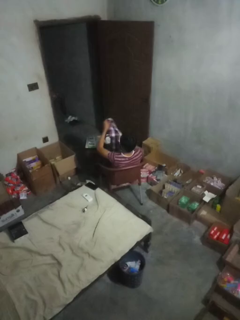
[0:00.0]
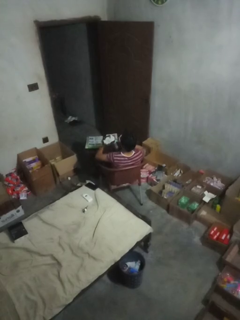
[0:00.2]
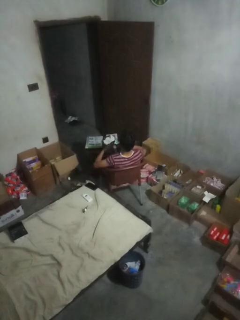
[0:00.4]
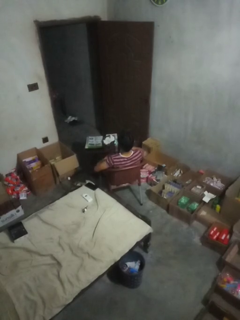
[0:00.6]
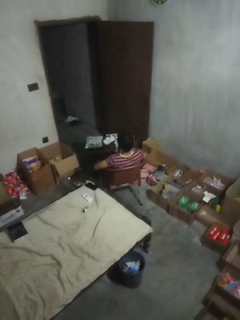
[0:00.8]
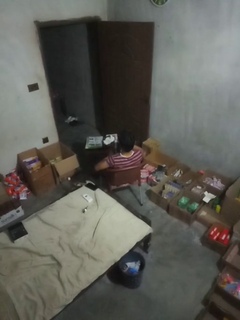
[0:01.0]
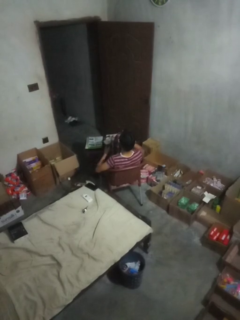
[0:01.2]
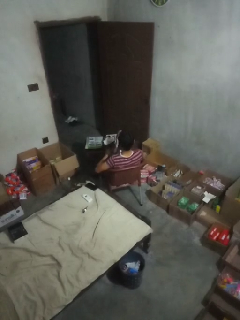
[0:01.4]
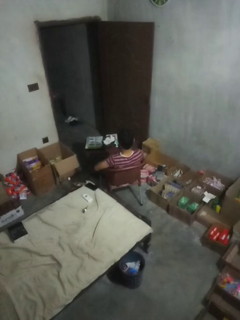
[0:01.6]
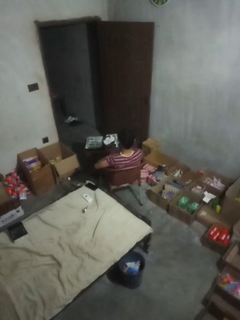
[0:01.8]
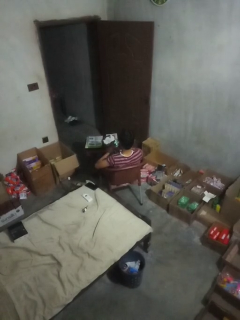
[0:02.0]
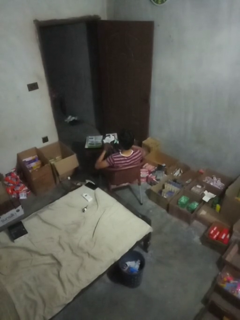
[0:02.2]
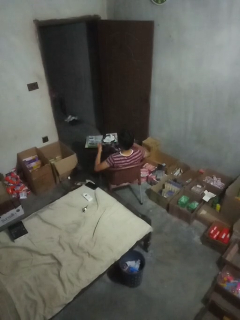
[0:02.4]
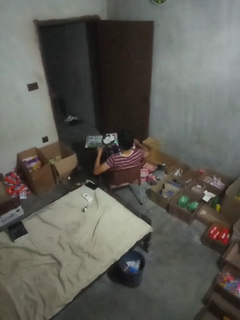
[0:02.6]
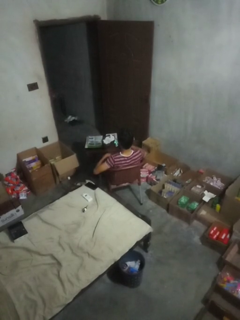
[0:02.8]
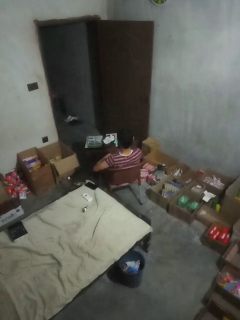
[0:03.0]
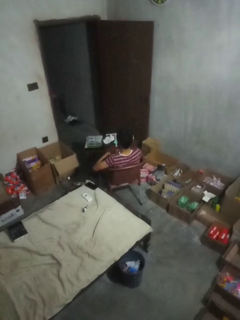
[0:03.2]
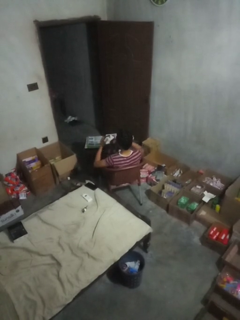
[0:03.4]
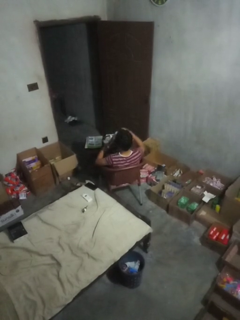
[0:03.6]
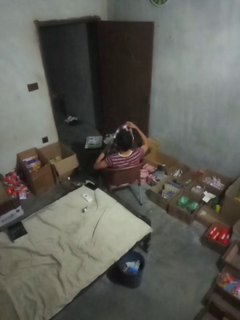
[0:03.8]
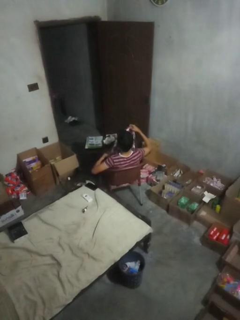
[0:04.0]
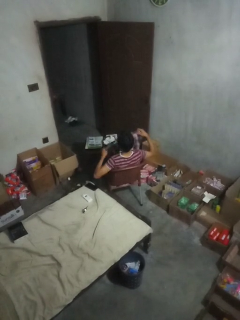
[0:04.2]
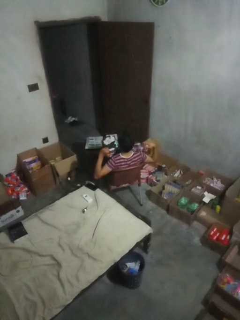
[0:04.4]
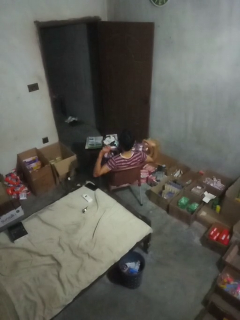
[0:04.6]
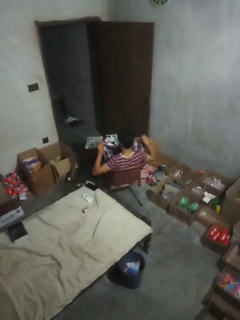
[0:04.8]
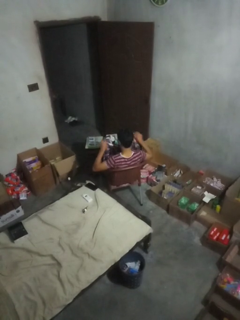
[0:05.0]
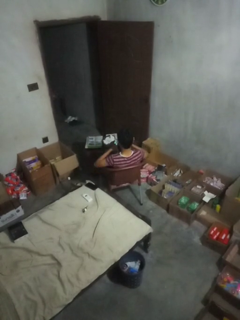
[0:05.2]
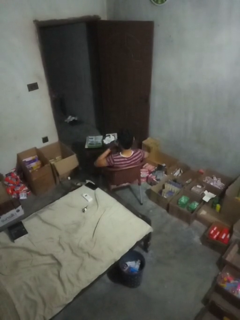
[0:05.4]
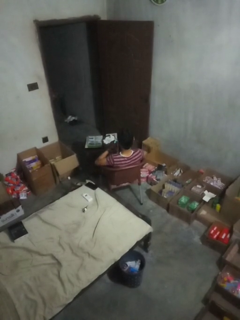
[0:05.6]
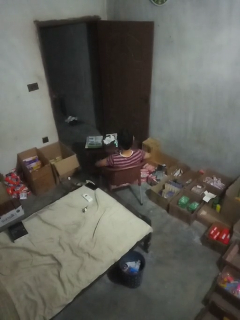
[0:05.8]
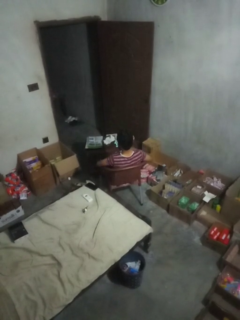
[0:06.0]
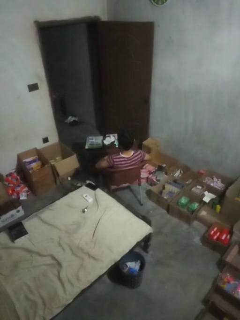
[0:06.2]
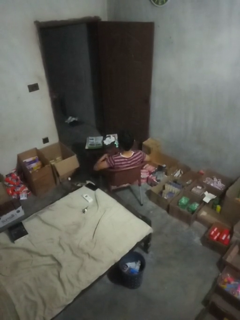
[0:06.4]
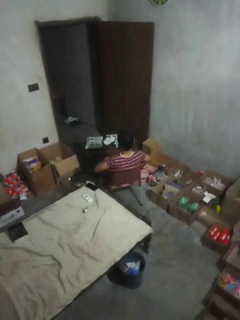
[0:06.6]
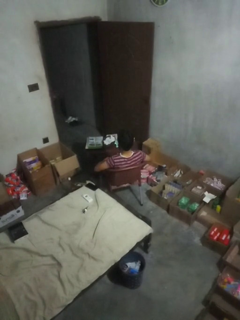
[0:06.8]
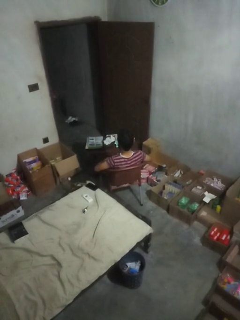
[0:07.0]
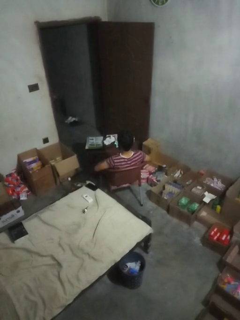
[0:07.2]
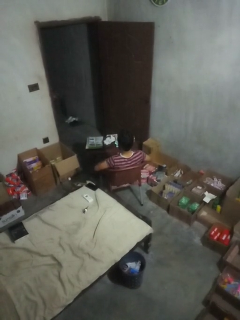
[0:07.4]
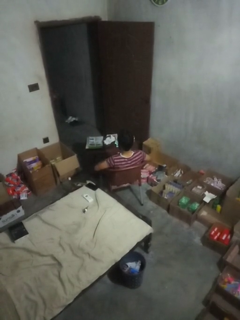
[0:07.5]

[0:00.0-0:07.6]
person folds shirt

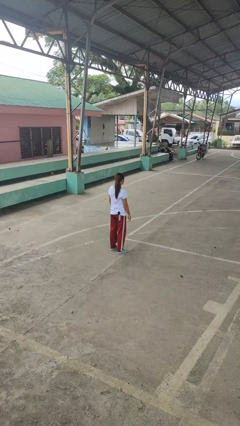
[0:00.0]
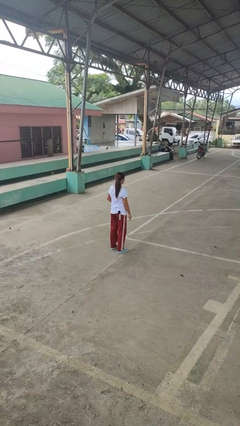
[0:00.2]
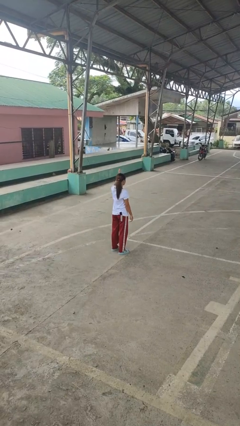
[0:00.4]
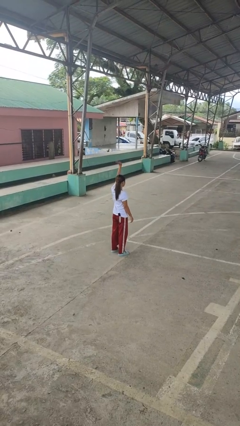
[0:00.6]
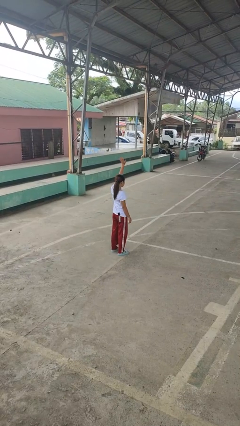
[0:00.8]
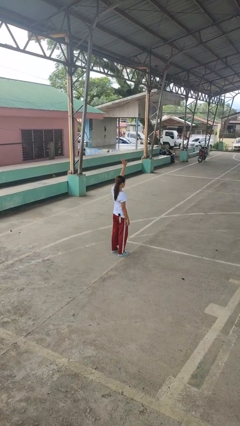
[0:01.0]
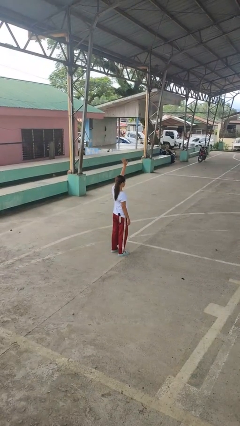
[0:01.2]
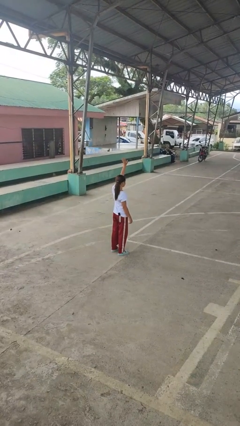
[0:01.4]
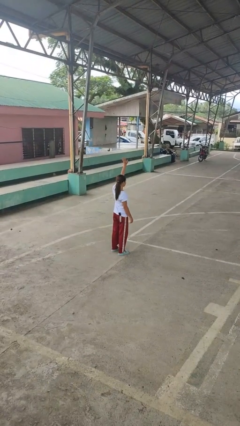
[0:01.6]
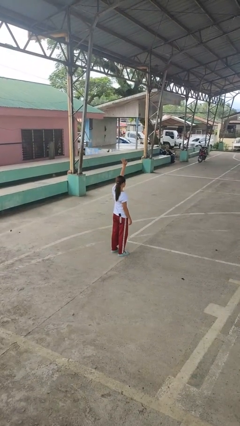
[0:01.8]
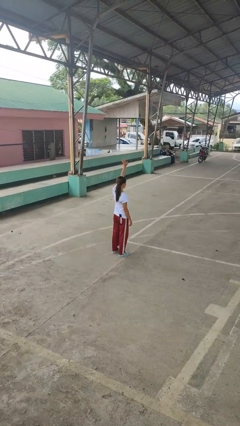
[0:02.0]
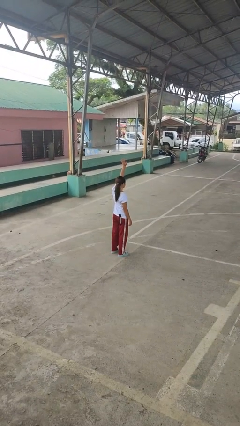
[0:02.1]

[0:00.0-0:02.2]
person gestures raise hand

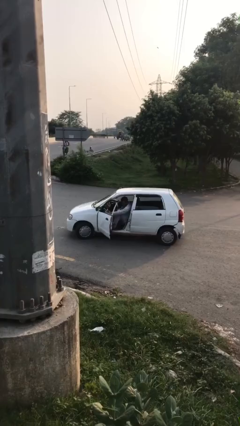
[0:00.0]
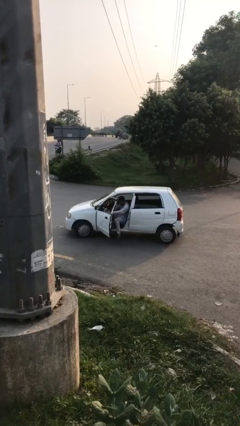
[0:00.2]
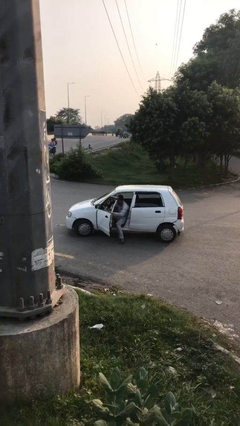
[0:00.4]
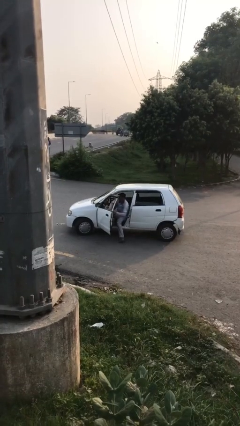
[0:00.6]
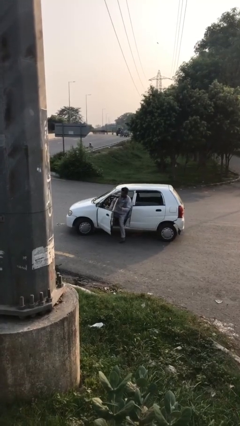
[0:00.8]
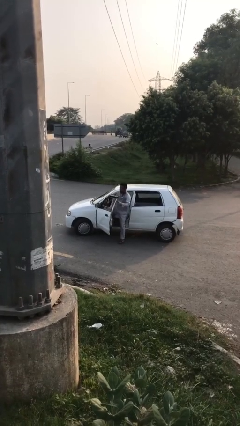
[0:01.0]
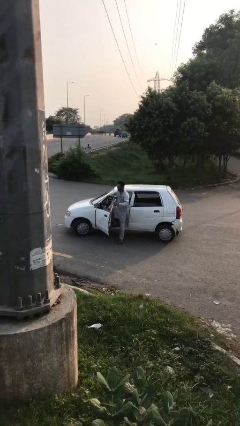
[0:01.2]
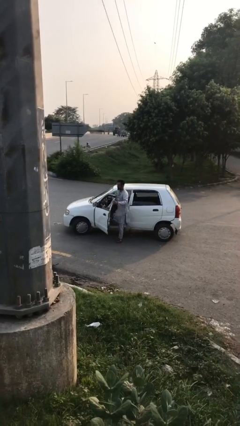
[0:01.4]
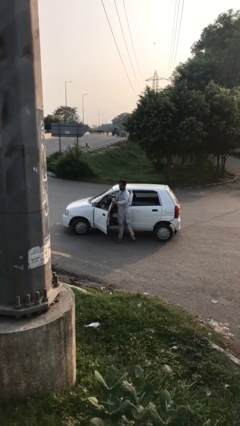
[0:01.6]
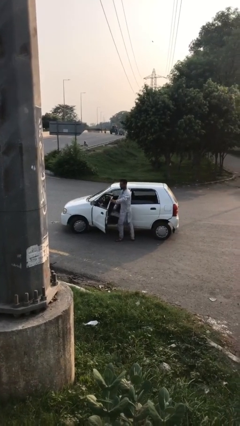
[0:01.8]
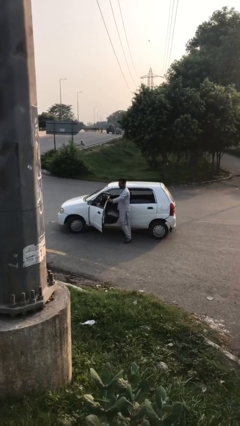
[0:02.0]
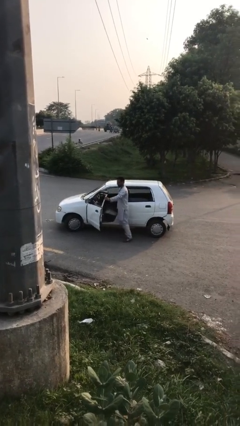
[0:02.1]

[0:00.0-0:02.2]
person exits car

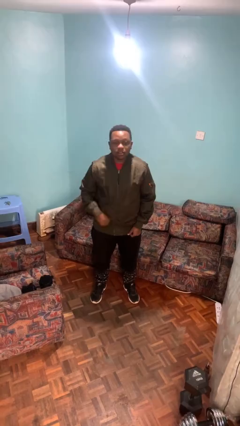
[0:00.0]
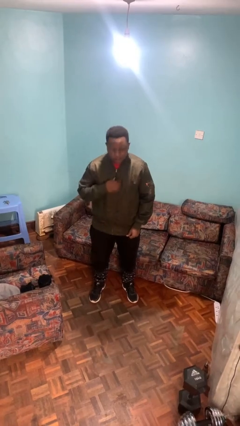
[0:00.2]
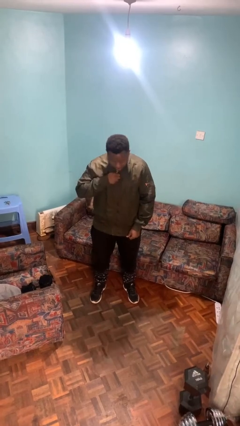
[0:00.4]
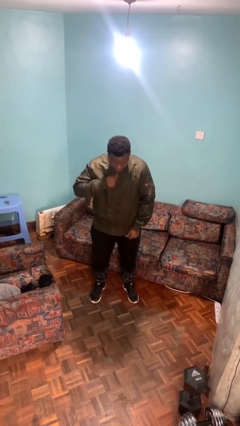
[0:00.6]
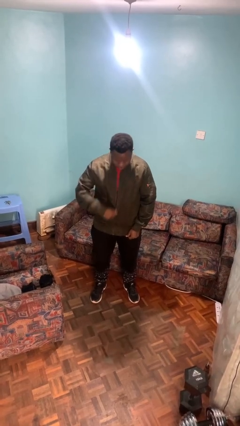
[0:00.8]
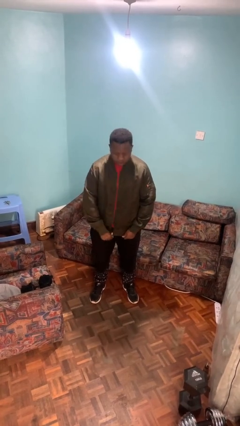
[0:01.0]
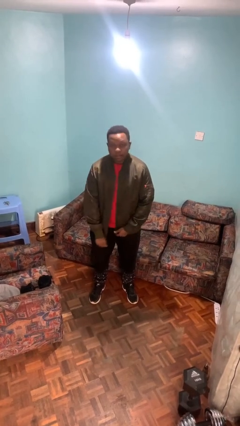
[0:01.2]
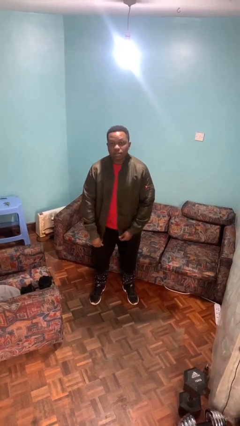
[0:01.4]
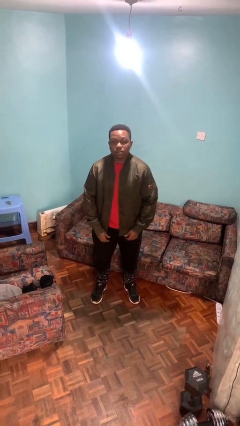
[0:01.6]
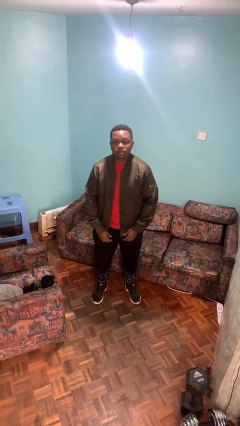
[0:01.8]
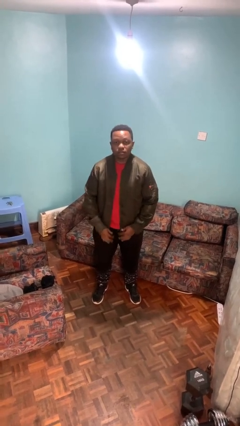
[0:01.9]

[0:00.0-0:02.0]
person unzips jacket

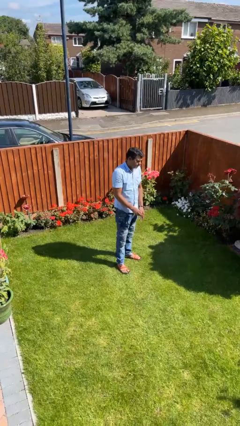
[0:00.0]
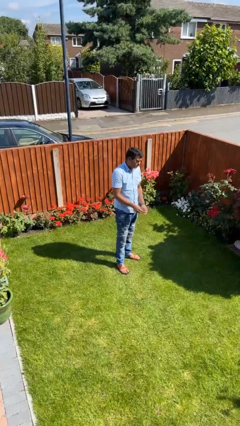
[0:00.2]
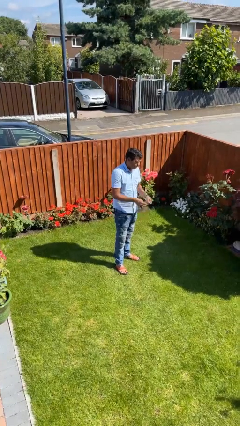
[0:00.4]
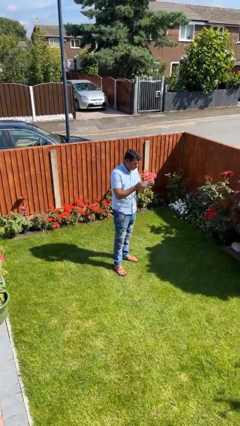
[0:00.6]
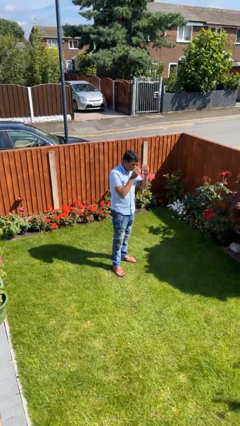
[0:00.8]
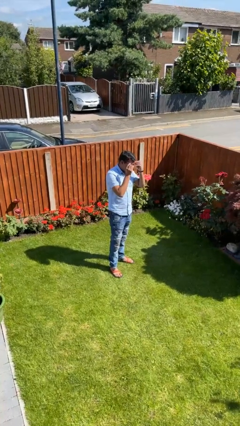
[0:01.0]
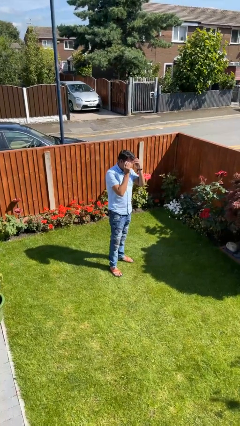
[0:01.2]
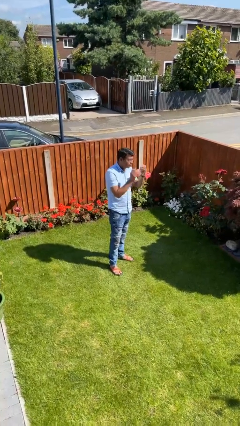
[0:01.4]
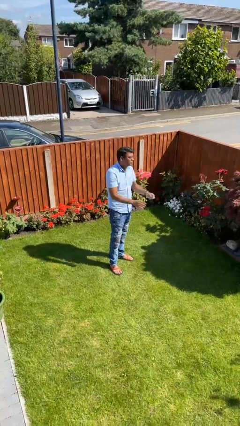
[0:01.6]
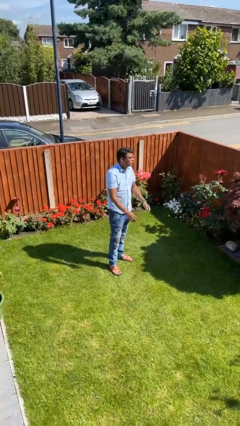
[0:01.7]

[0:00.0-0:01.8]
person puts on glasses

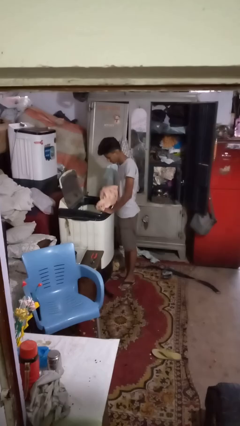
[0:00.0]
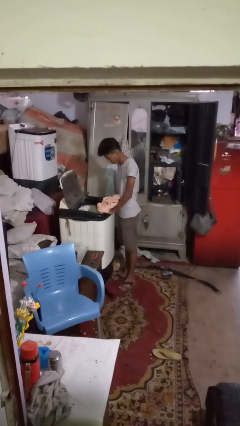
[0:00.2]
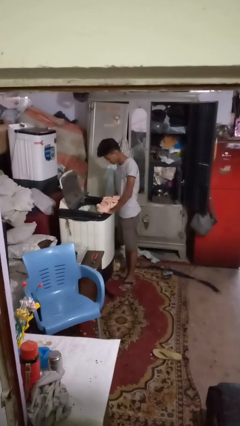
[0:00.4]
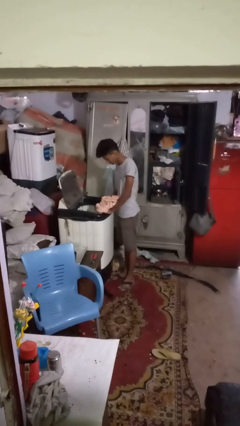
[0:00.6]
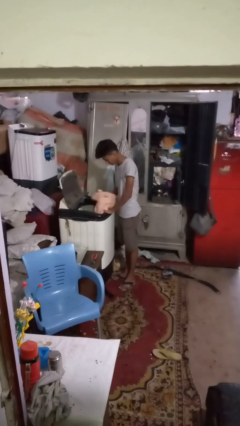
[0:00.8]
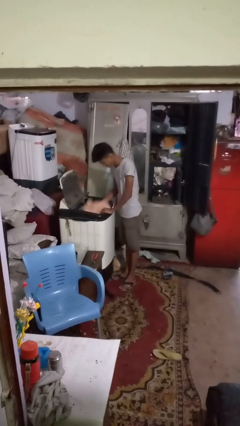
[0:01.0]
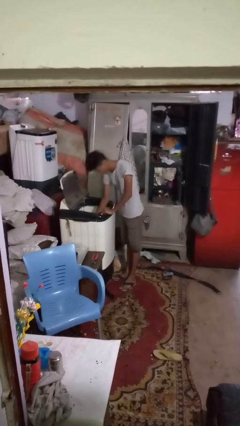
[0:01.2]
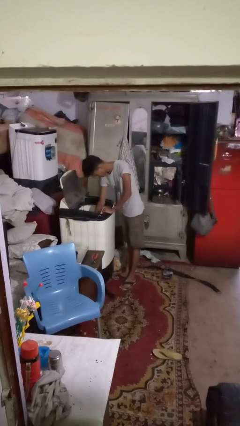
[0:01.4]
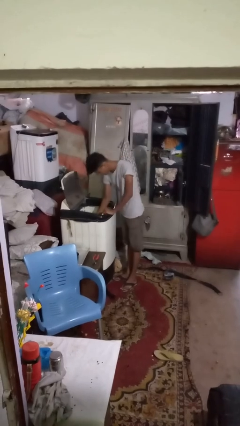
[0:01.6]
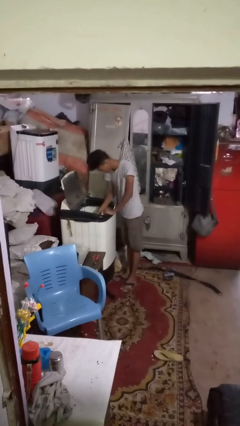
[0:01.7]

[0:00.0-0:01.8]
person loads clotheswasher

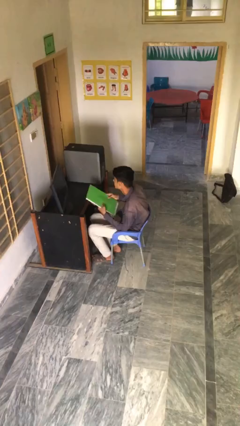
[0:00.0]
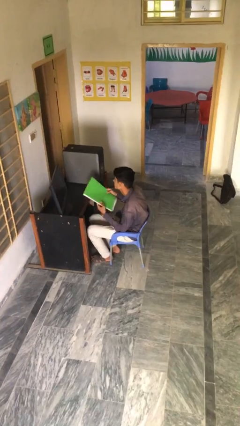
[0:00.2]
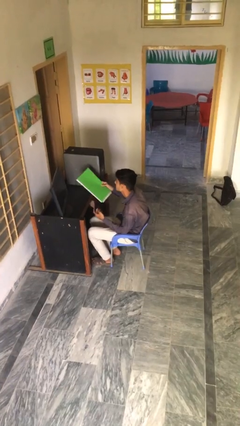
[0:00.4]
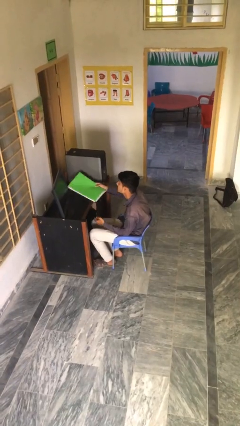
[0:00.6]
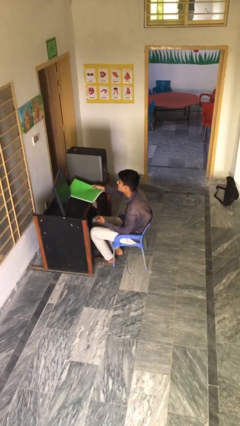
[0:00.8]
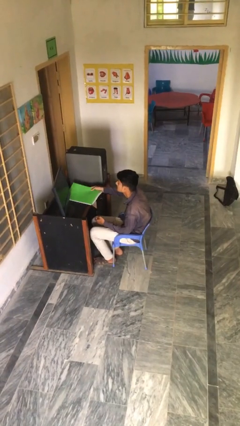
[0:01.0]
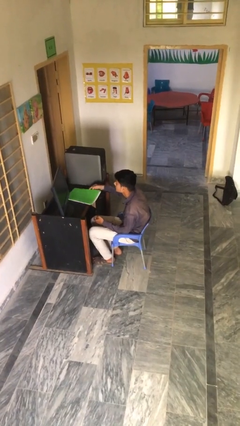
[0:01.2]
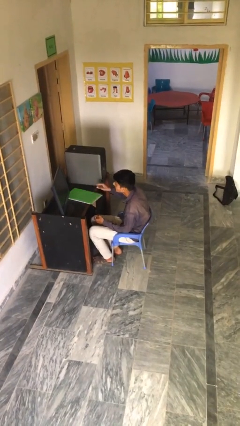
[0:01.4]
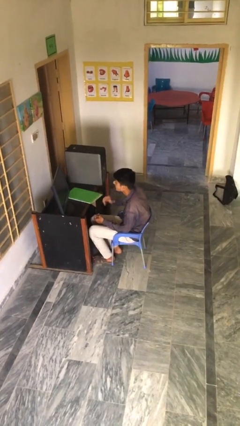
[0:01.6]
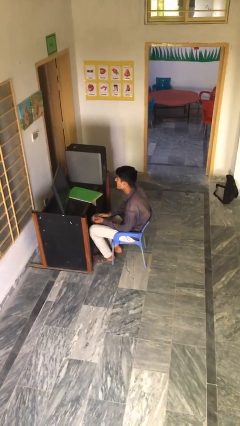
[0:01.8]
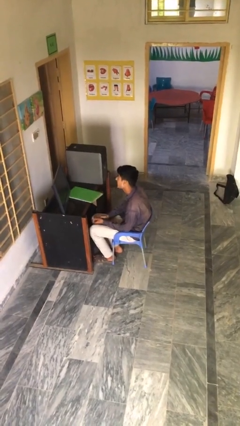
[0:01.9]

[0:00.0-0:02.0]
person puts down object on table
